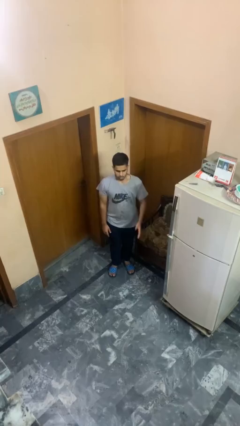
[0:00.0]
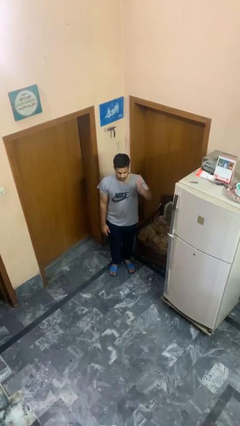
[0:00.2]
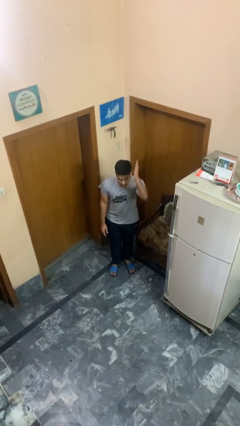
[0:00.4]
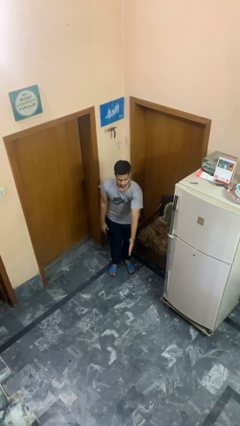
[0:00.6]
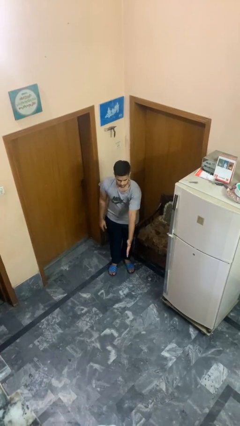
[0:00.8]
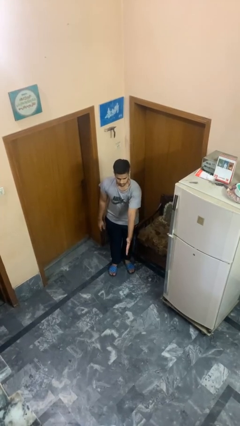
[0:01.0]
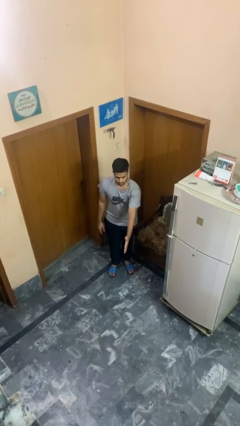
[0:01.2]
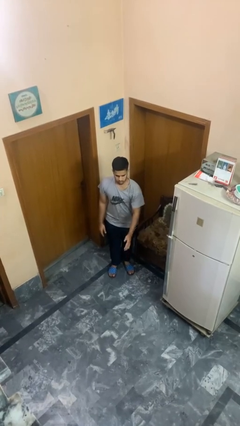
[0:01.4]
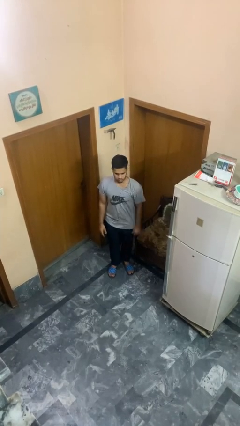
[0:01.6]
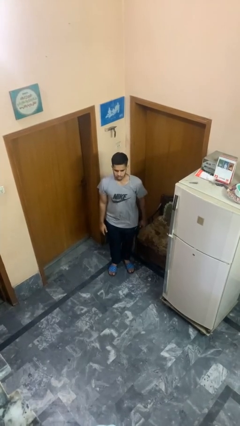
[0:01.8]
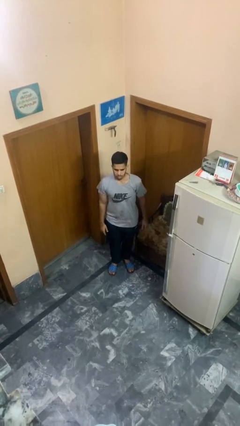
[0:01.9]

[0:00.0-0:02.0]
person karate chop

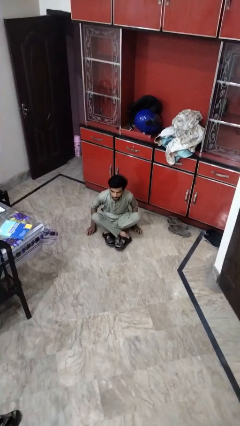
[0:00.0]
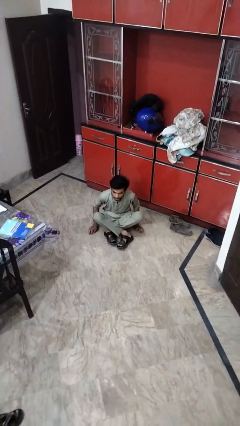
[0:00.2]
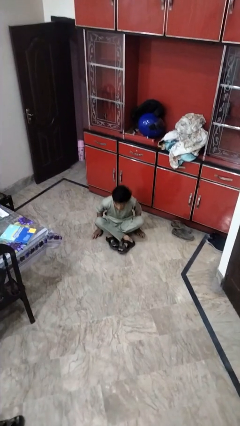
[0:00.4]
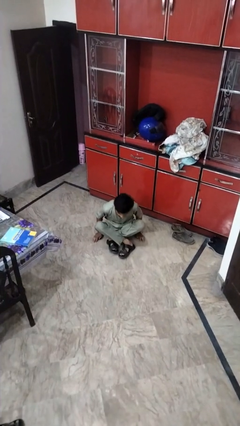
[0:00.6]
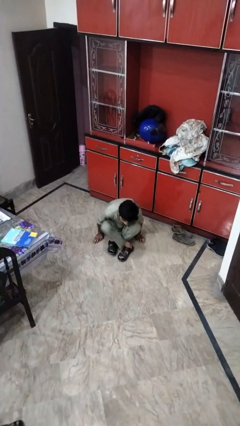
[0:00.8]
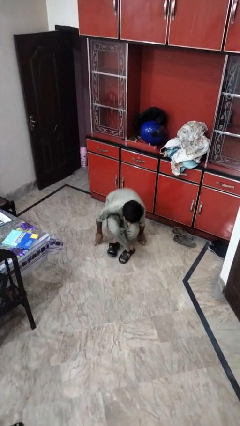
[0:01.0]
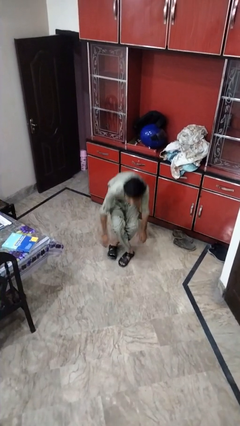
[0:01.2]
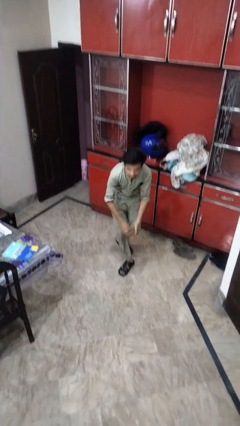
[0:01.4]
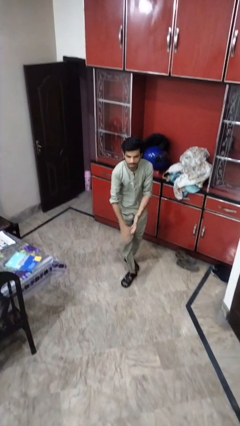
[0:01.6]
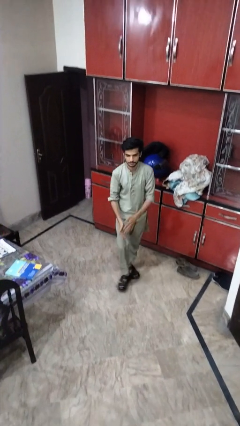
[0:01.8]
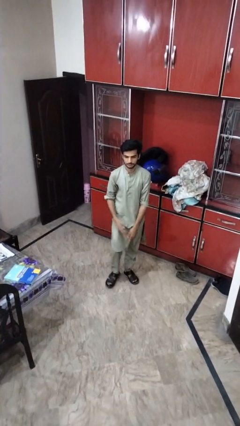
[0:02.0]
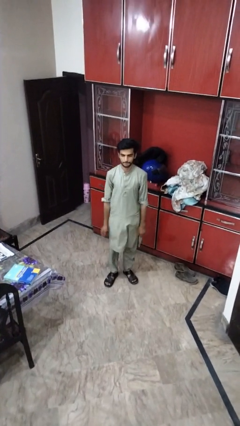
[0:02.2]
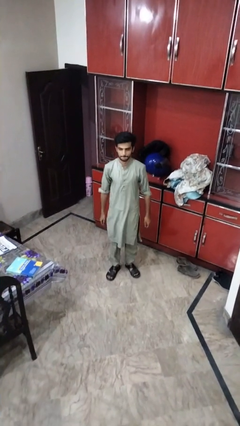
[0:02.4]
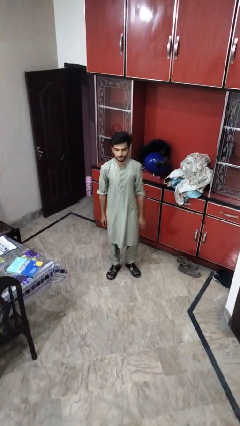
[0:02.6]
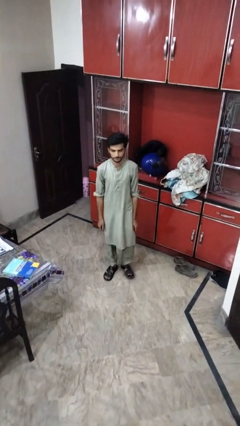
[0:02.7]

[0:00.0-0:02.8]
person stands up from floor

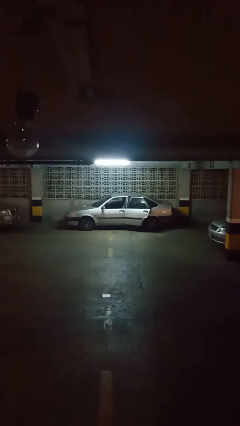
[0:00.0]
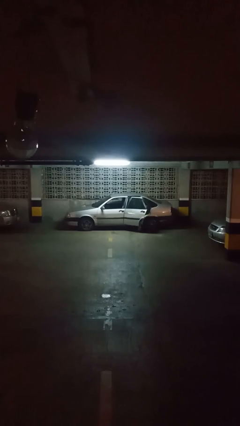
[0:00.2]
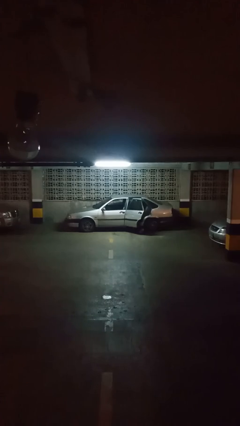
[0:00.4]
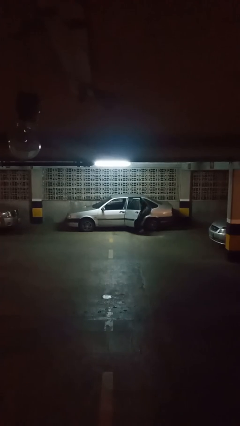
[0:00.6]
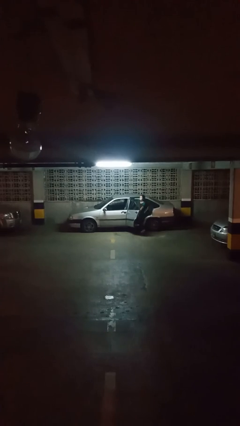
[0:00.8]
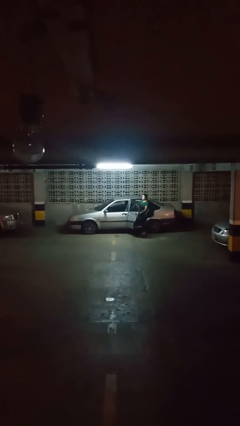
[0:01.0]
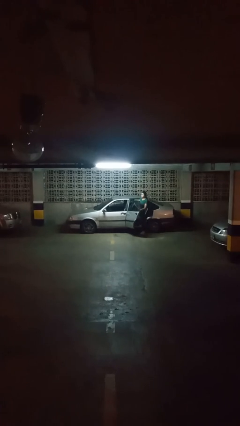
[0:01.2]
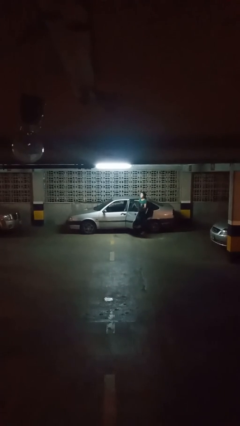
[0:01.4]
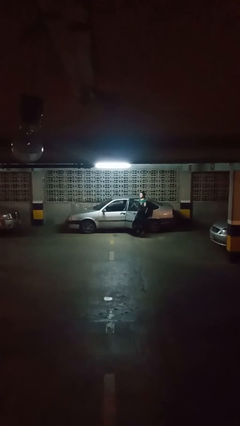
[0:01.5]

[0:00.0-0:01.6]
car drops off person

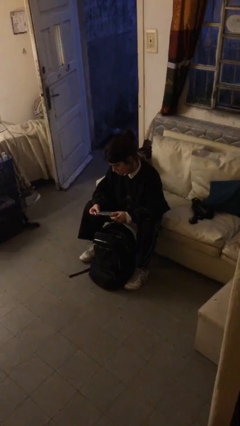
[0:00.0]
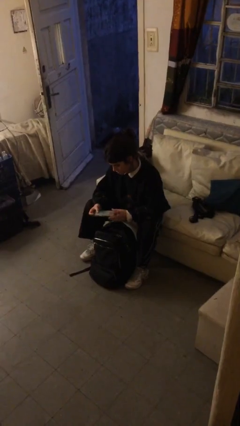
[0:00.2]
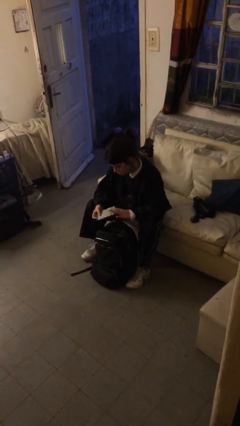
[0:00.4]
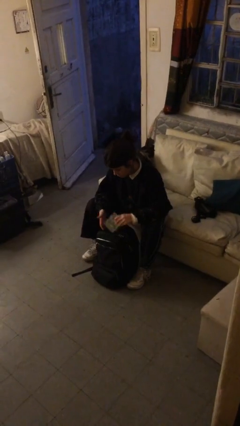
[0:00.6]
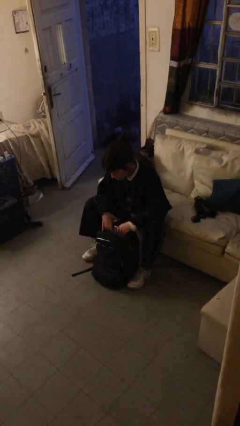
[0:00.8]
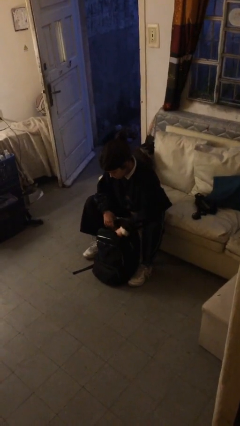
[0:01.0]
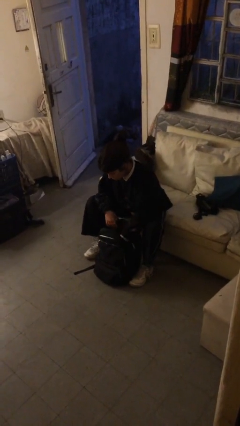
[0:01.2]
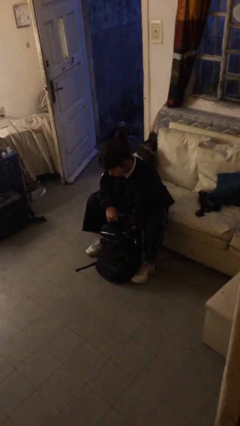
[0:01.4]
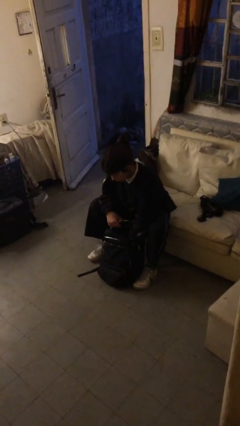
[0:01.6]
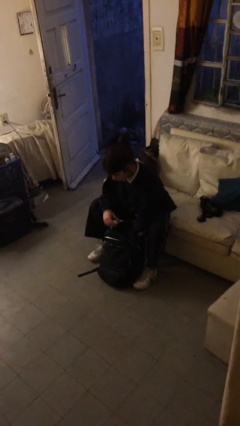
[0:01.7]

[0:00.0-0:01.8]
person puts object into backpack

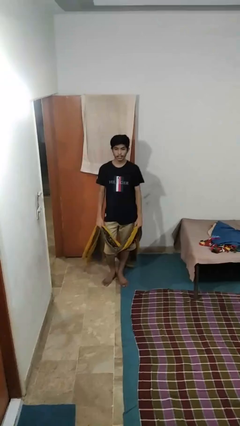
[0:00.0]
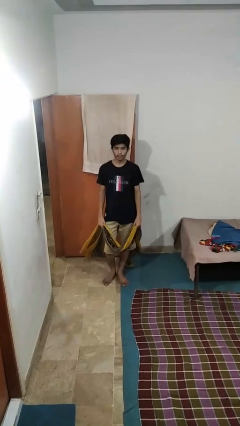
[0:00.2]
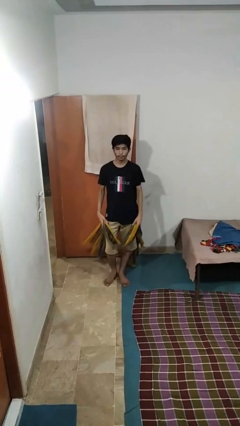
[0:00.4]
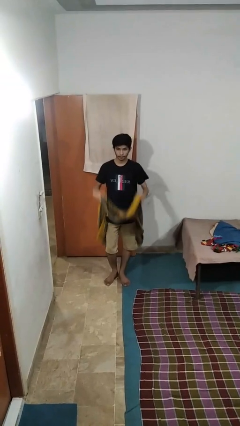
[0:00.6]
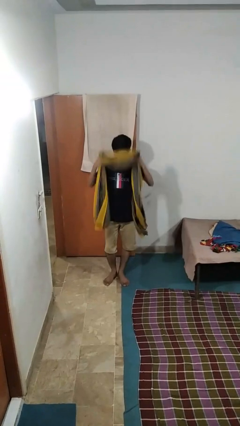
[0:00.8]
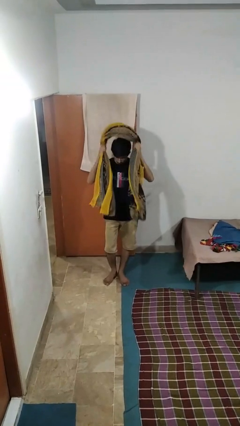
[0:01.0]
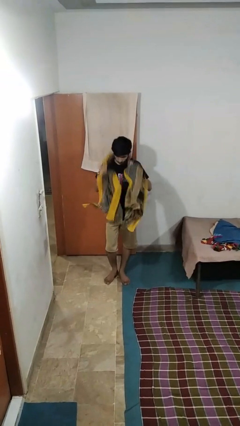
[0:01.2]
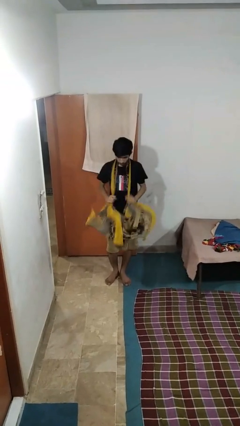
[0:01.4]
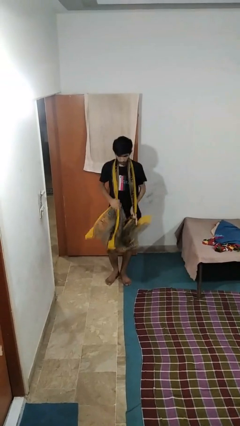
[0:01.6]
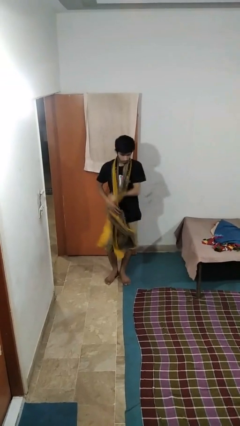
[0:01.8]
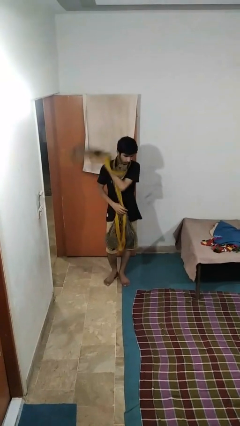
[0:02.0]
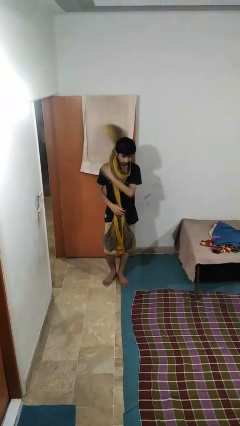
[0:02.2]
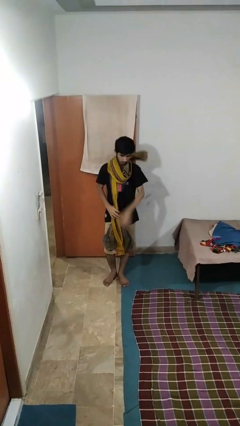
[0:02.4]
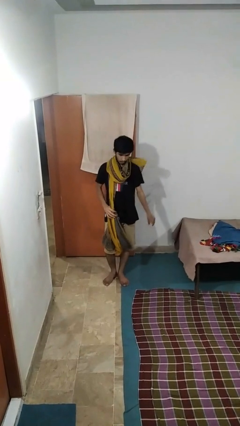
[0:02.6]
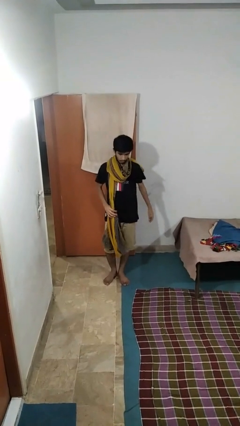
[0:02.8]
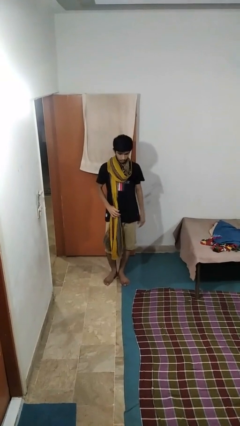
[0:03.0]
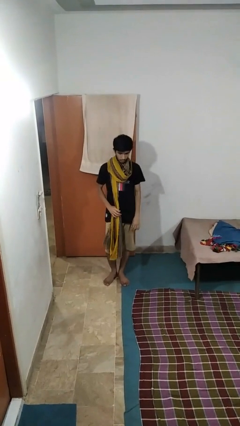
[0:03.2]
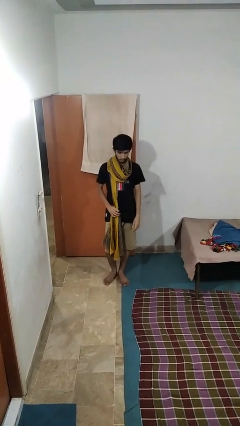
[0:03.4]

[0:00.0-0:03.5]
person puts on scarf

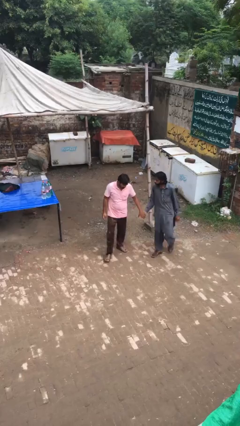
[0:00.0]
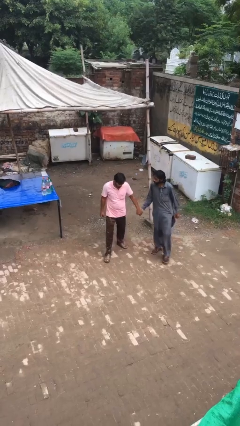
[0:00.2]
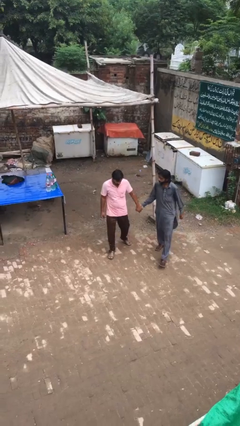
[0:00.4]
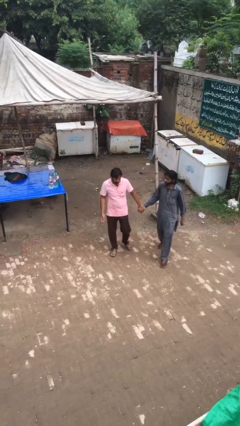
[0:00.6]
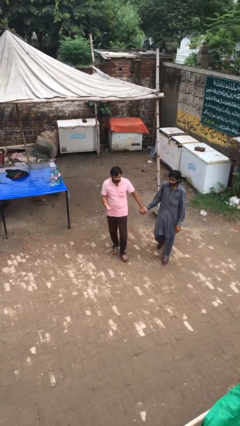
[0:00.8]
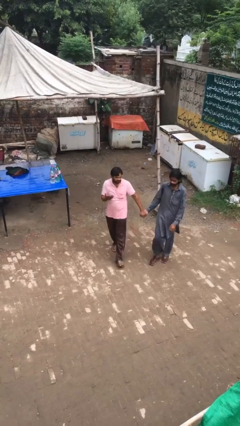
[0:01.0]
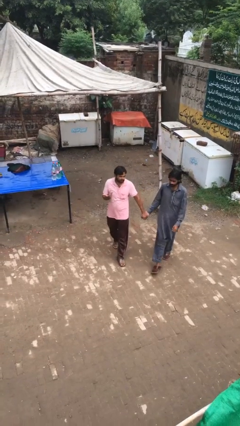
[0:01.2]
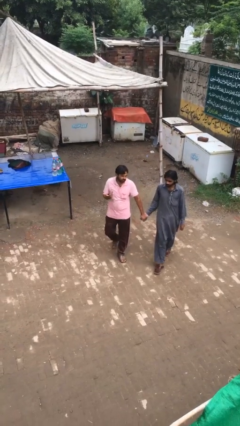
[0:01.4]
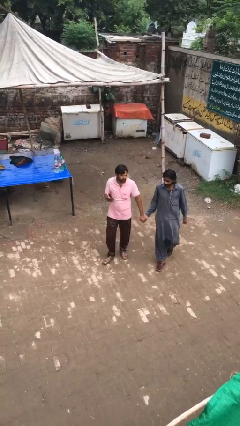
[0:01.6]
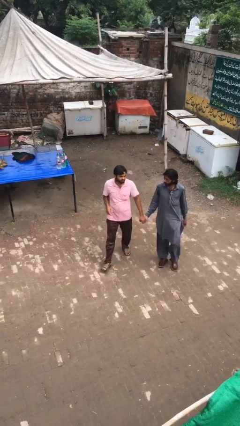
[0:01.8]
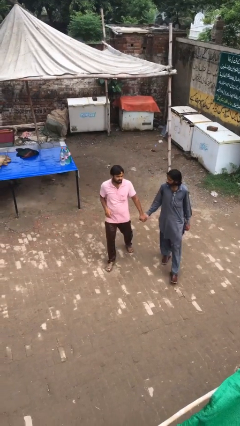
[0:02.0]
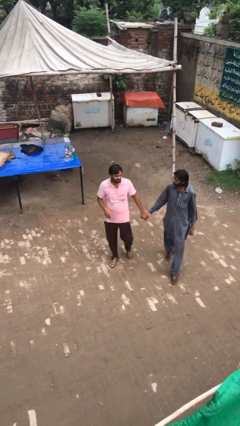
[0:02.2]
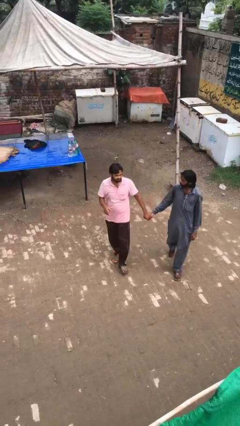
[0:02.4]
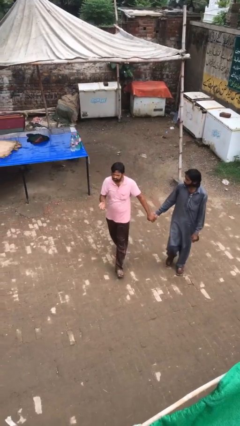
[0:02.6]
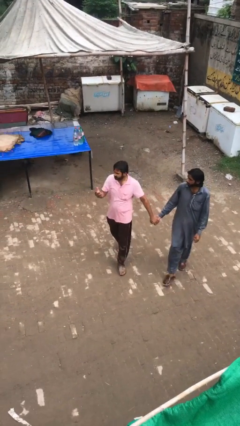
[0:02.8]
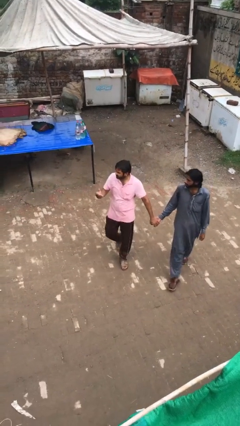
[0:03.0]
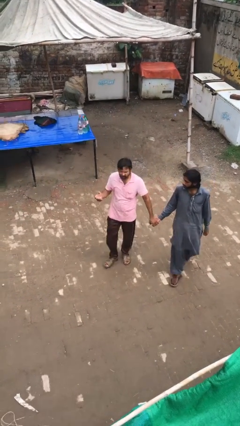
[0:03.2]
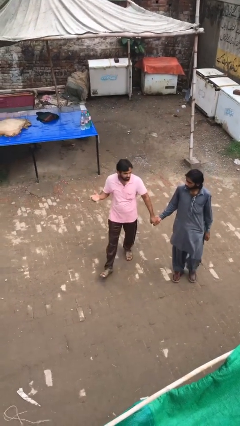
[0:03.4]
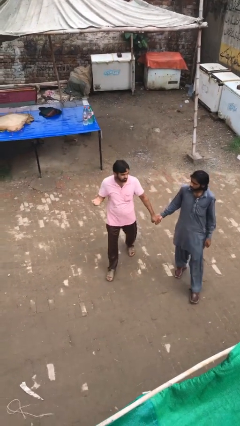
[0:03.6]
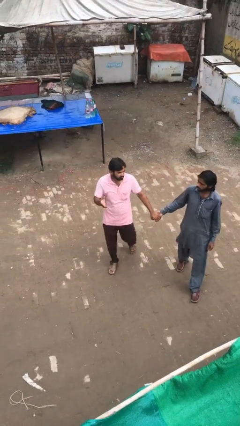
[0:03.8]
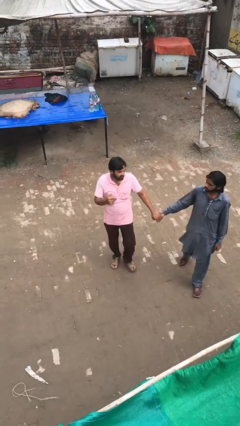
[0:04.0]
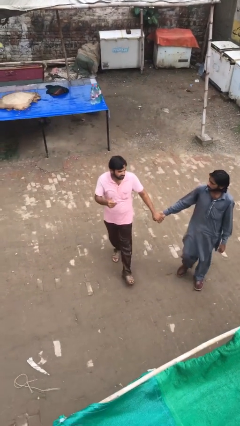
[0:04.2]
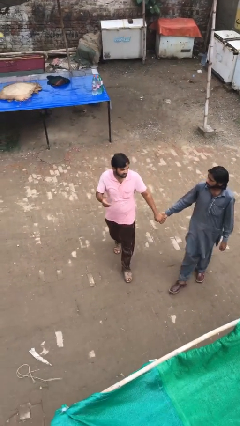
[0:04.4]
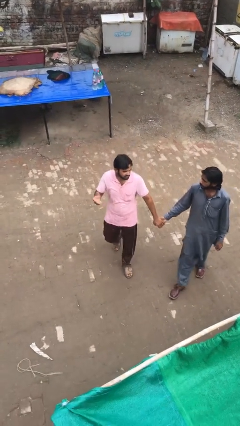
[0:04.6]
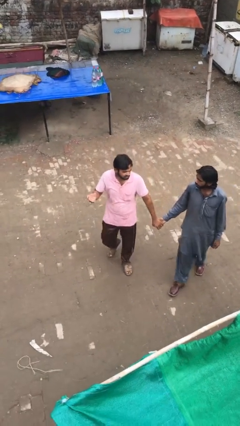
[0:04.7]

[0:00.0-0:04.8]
person holds hand

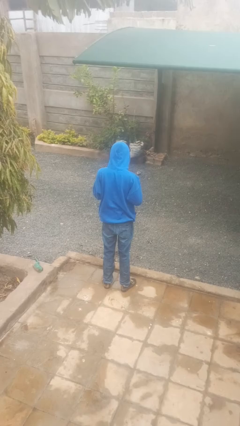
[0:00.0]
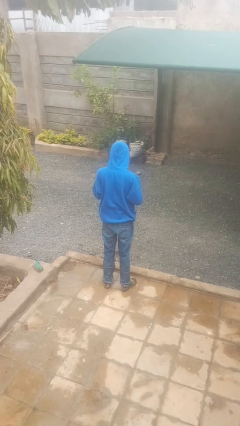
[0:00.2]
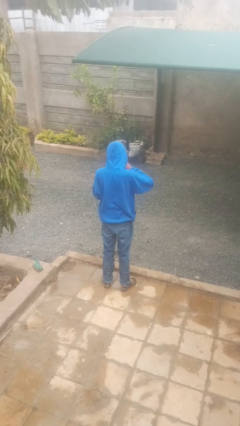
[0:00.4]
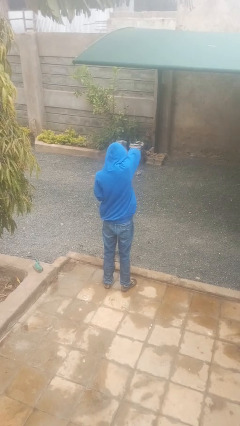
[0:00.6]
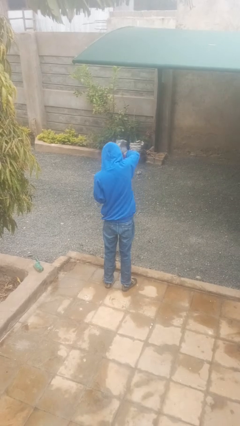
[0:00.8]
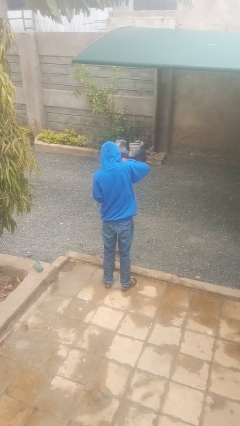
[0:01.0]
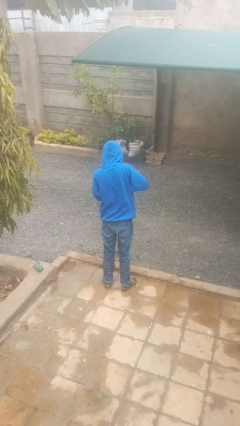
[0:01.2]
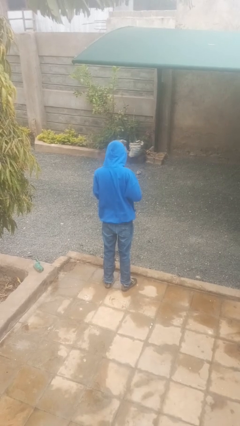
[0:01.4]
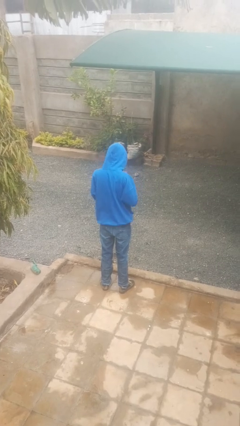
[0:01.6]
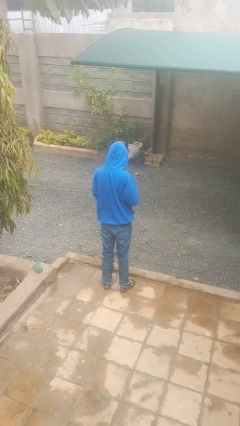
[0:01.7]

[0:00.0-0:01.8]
person punches
